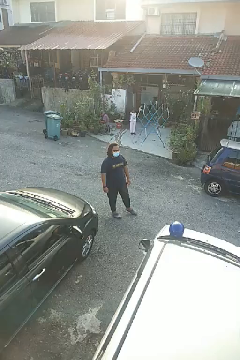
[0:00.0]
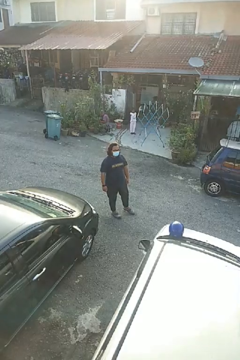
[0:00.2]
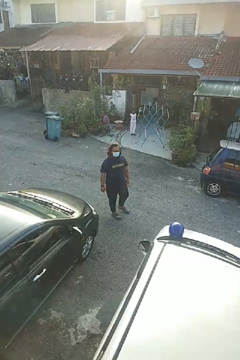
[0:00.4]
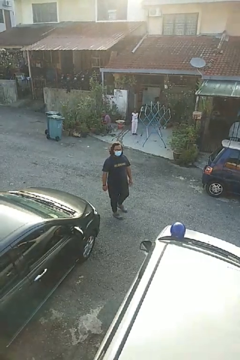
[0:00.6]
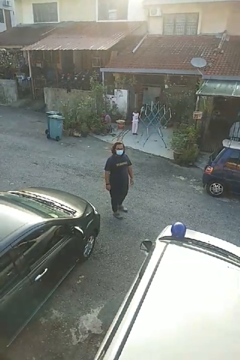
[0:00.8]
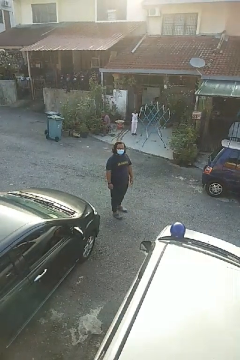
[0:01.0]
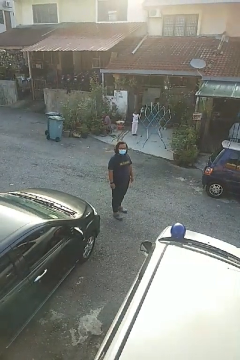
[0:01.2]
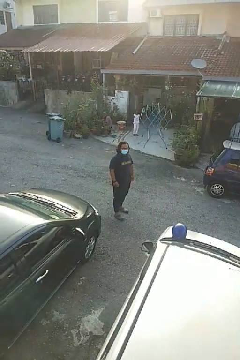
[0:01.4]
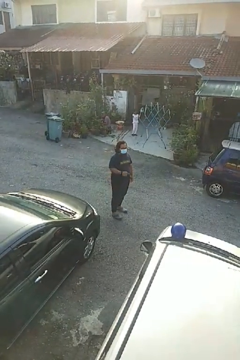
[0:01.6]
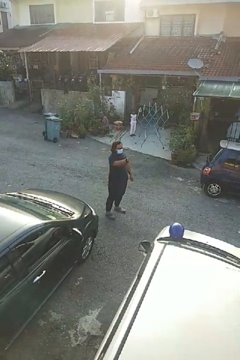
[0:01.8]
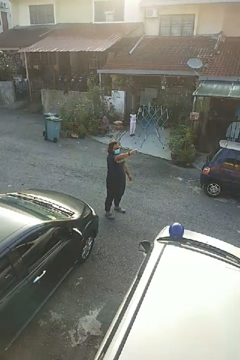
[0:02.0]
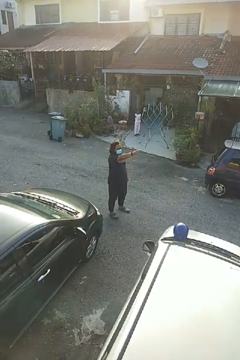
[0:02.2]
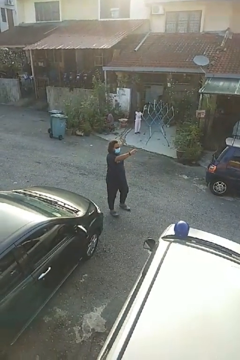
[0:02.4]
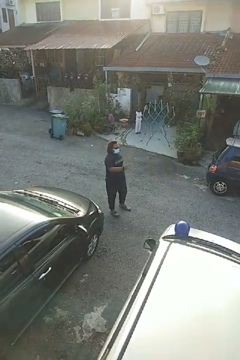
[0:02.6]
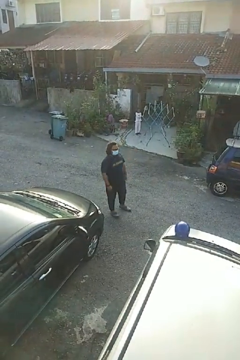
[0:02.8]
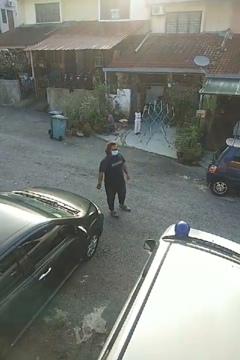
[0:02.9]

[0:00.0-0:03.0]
person points at person

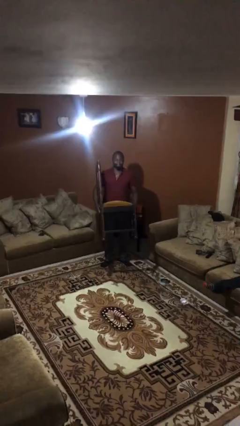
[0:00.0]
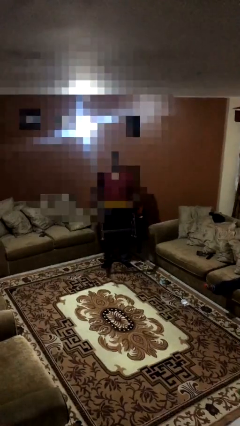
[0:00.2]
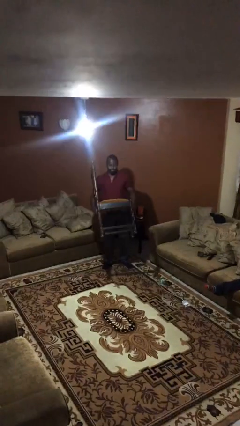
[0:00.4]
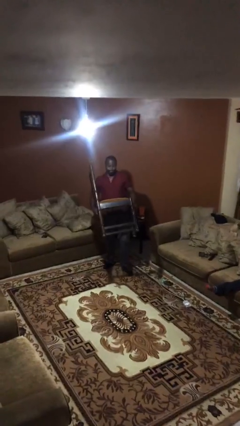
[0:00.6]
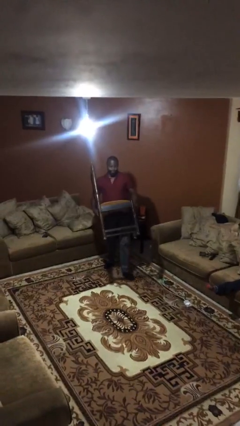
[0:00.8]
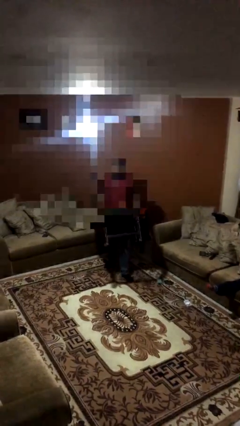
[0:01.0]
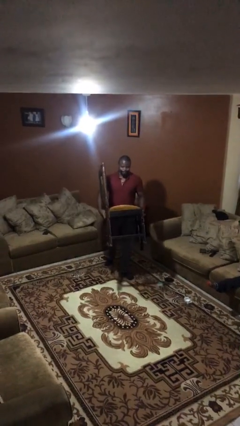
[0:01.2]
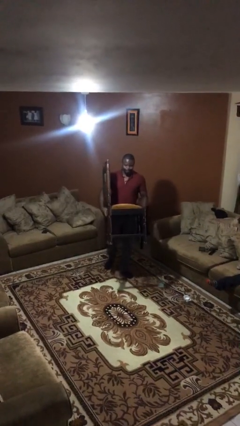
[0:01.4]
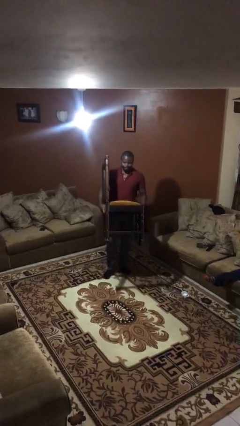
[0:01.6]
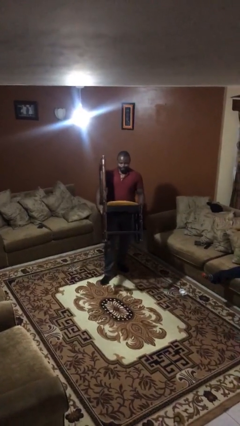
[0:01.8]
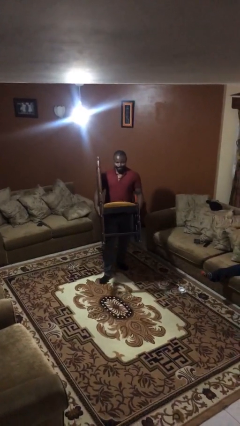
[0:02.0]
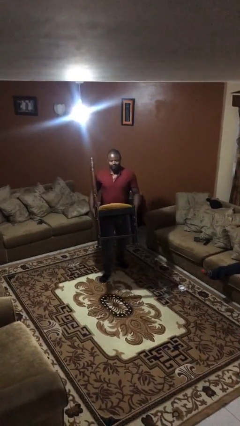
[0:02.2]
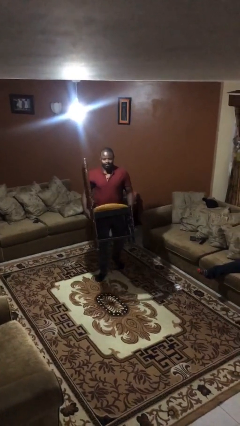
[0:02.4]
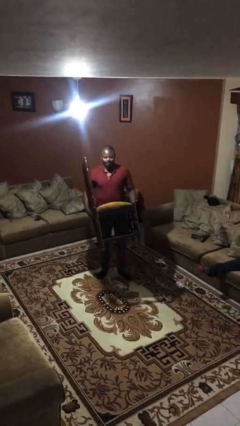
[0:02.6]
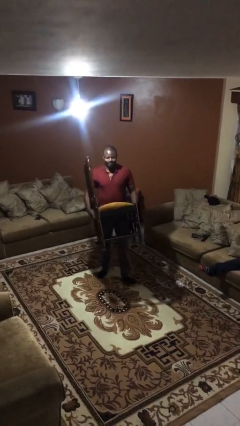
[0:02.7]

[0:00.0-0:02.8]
person carries heavy object

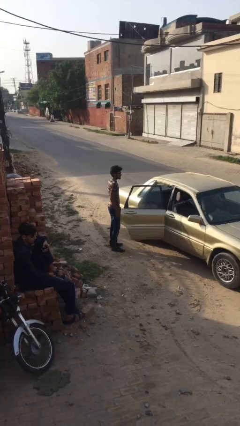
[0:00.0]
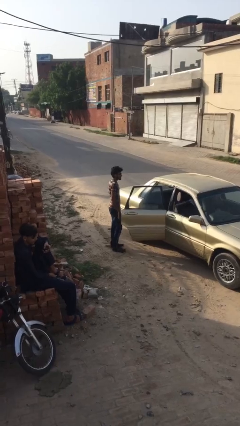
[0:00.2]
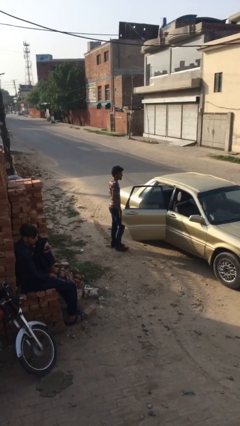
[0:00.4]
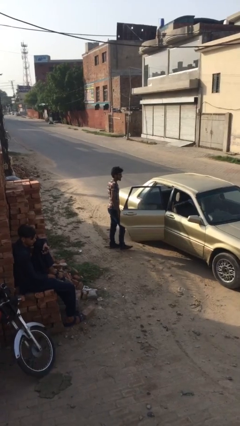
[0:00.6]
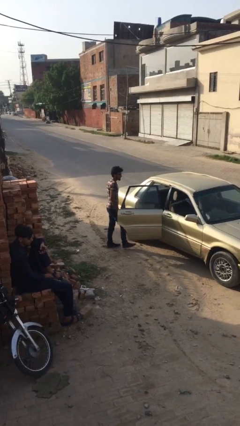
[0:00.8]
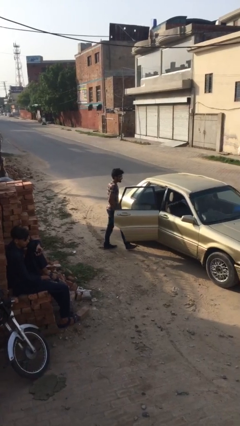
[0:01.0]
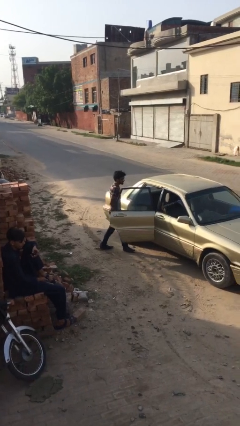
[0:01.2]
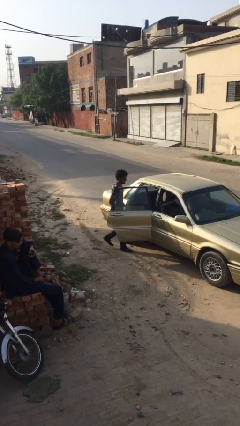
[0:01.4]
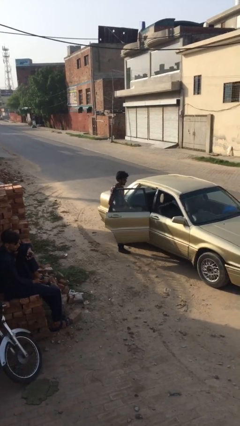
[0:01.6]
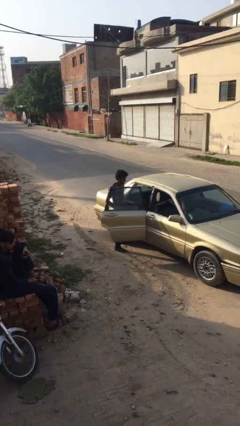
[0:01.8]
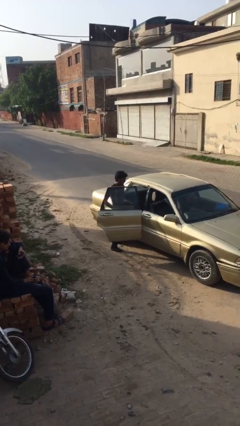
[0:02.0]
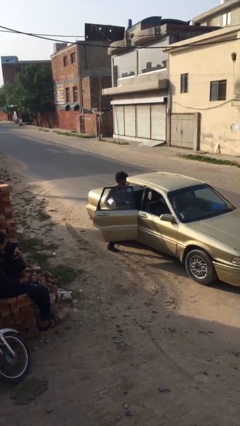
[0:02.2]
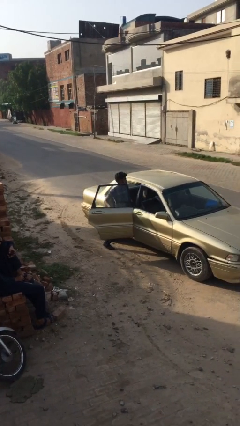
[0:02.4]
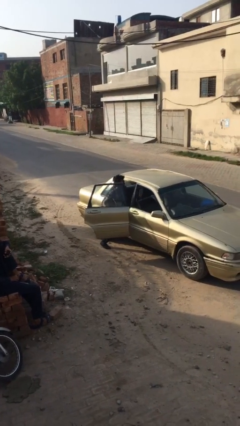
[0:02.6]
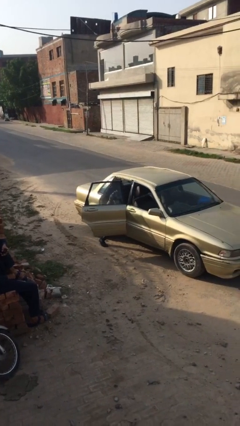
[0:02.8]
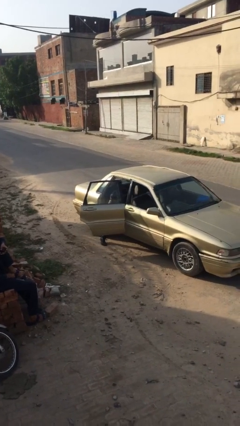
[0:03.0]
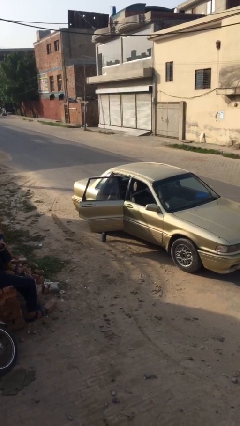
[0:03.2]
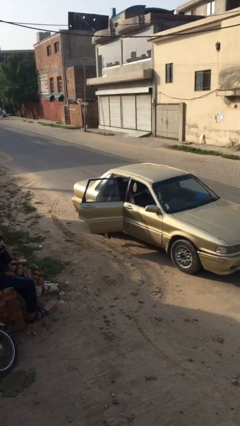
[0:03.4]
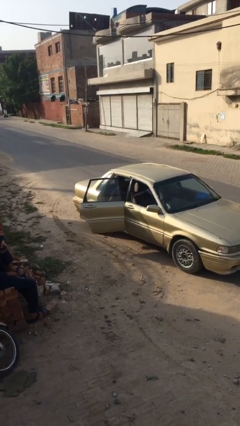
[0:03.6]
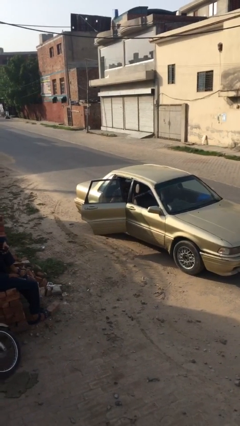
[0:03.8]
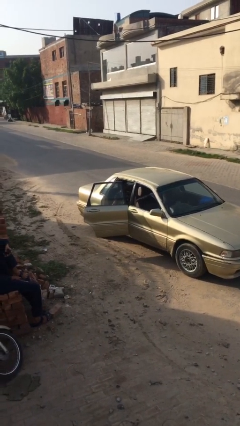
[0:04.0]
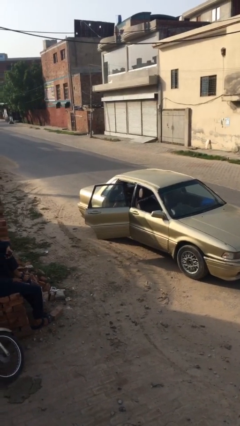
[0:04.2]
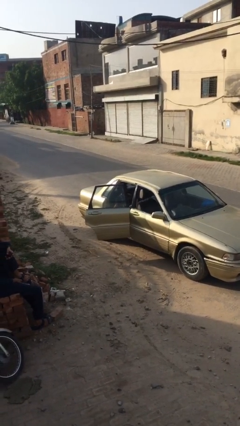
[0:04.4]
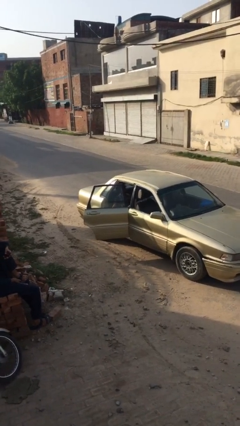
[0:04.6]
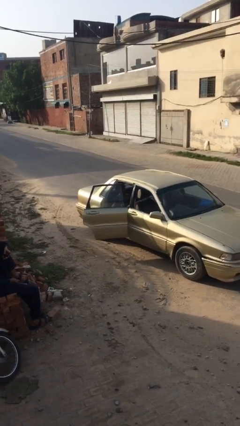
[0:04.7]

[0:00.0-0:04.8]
person enters car

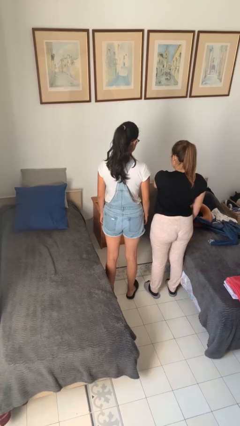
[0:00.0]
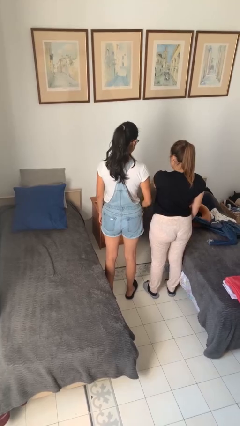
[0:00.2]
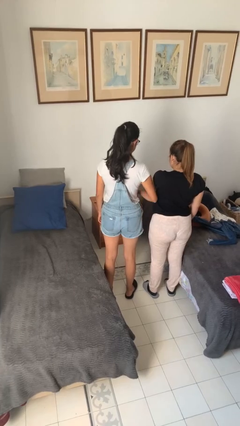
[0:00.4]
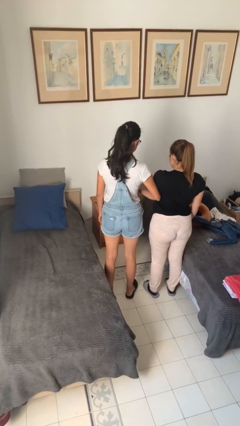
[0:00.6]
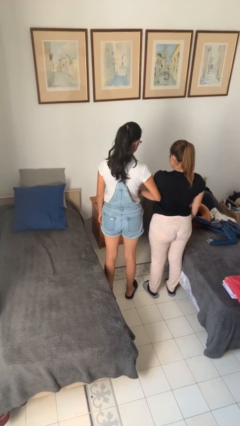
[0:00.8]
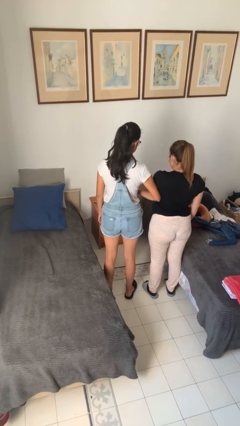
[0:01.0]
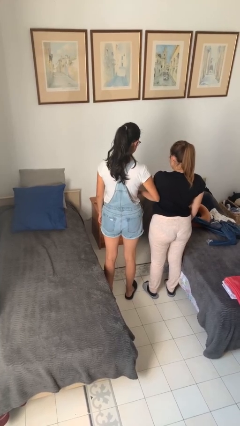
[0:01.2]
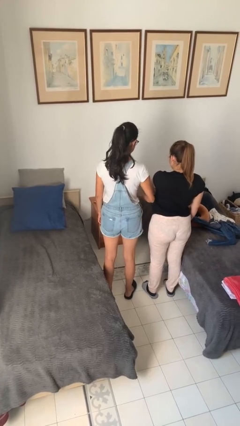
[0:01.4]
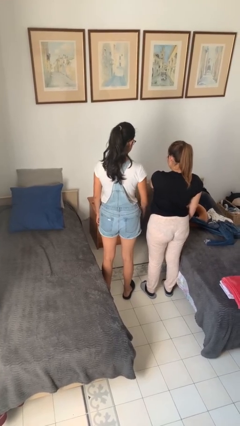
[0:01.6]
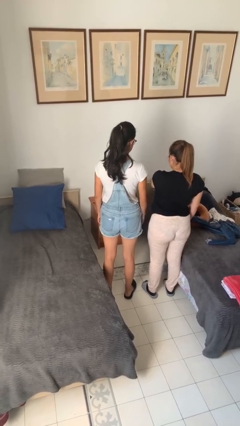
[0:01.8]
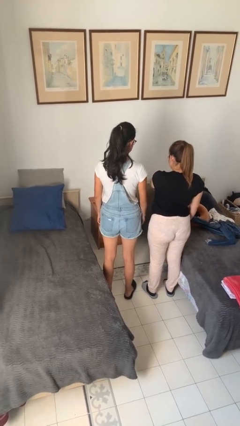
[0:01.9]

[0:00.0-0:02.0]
person nudges person with elbow

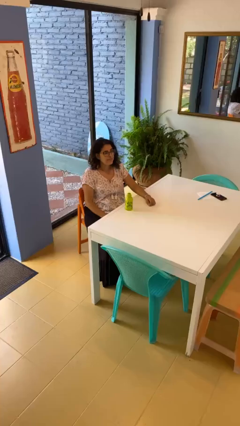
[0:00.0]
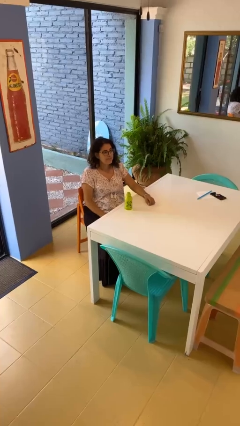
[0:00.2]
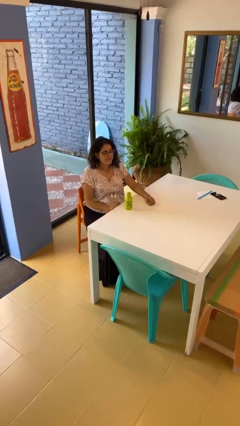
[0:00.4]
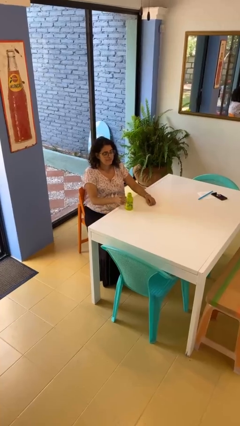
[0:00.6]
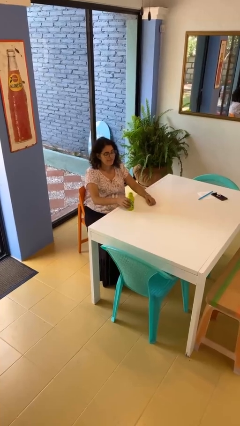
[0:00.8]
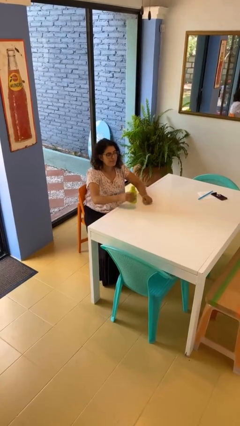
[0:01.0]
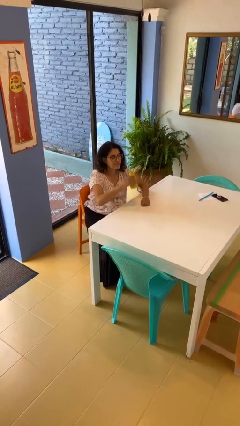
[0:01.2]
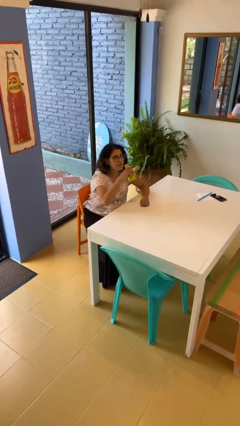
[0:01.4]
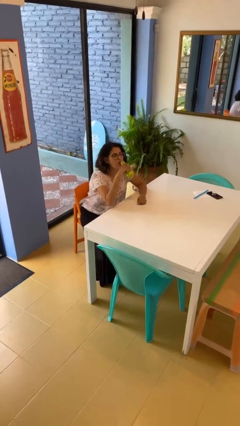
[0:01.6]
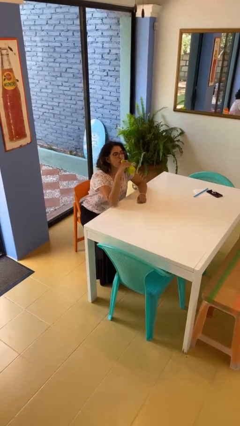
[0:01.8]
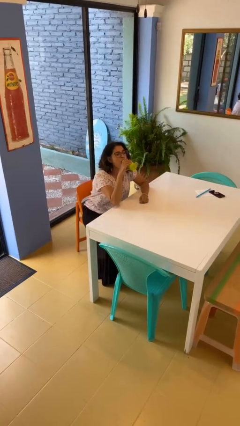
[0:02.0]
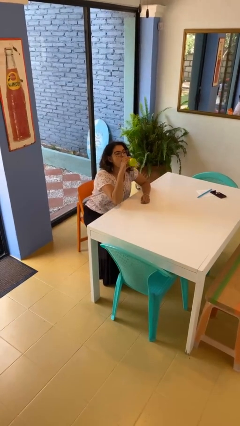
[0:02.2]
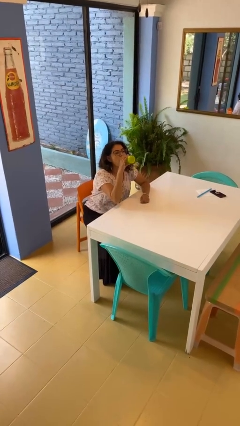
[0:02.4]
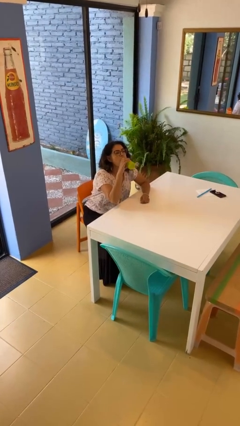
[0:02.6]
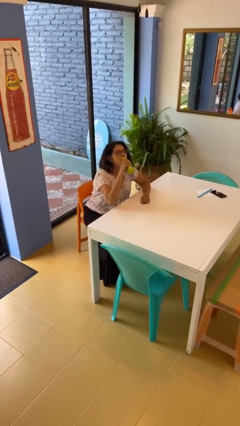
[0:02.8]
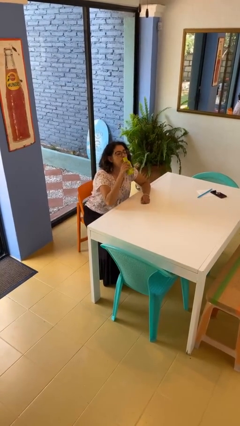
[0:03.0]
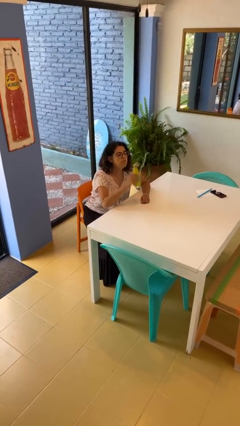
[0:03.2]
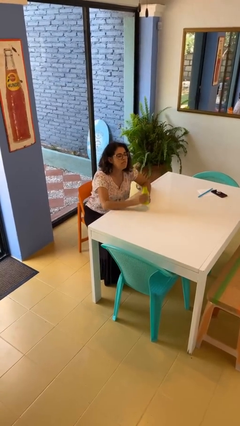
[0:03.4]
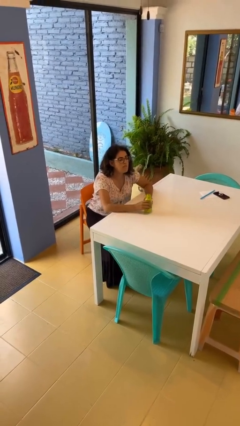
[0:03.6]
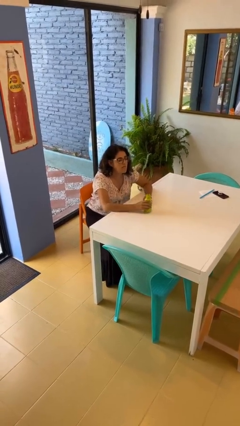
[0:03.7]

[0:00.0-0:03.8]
person drinks from bottle

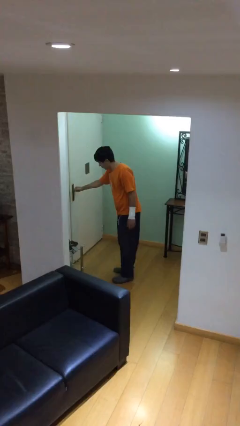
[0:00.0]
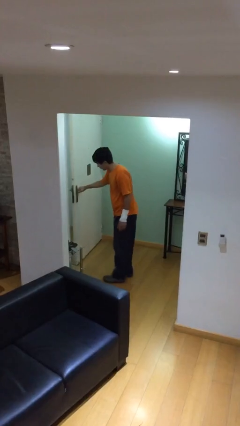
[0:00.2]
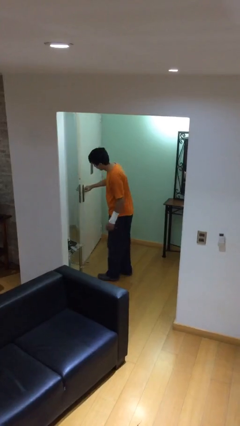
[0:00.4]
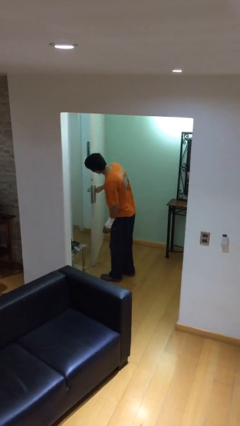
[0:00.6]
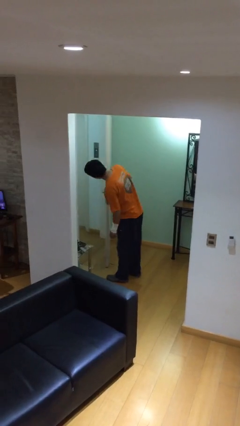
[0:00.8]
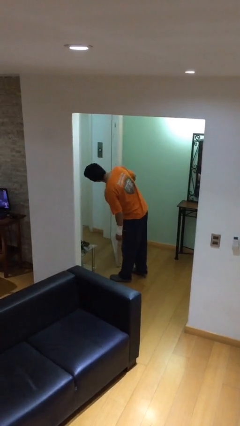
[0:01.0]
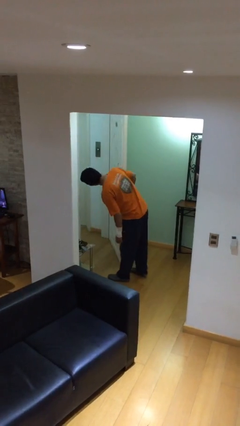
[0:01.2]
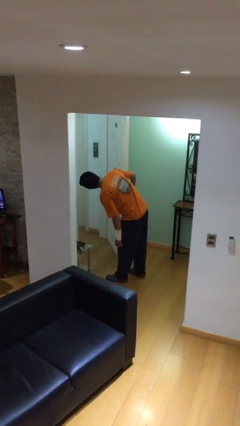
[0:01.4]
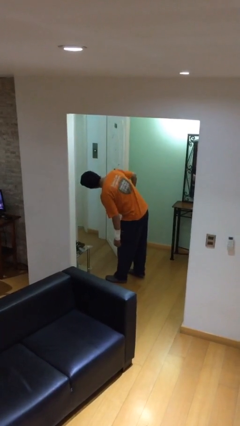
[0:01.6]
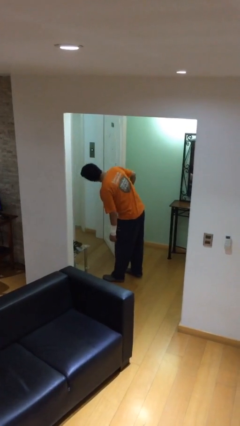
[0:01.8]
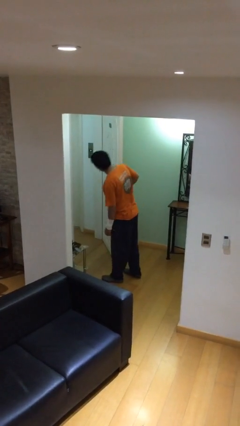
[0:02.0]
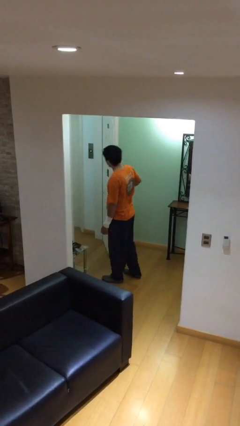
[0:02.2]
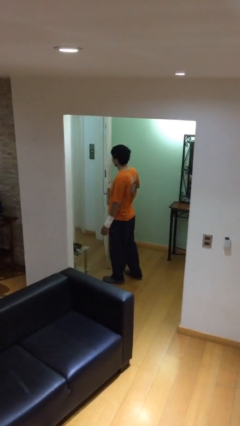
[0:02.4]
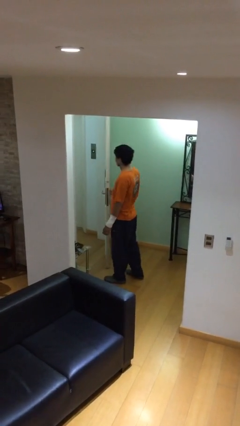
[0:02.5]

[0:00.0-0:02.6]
person opens facility door
